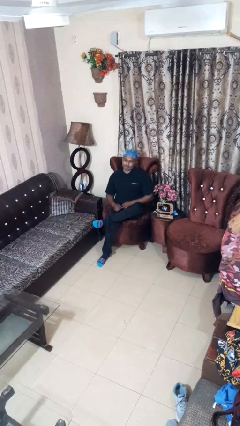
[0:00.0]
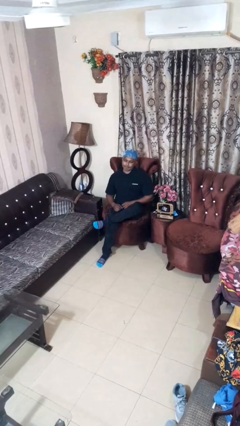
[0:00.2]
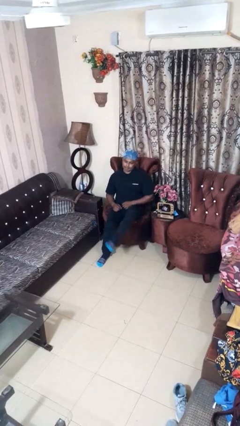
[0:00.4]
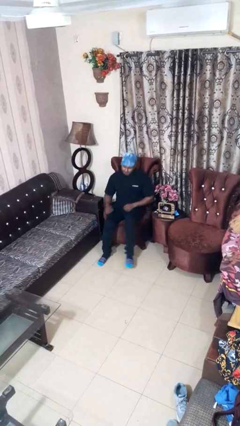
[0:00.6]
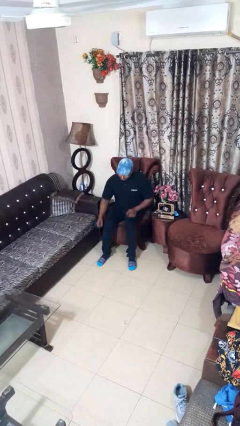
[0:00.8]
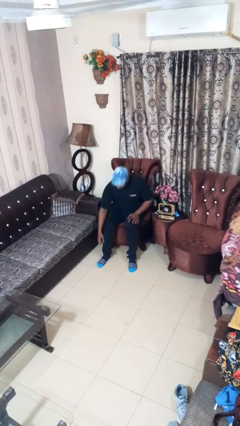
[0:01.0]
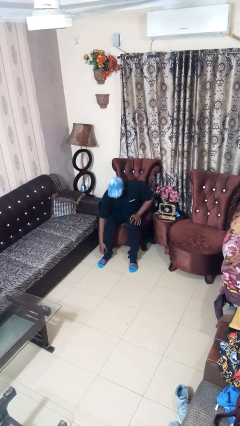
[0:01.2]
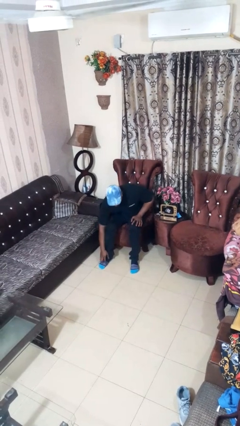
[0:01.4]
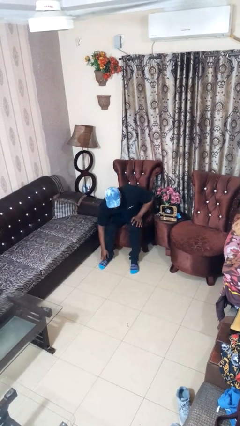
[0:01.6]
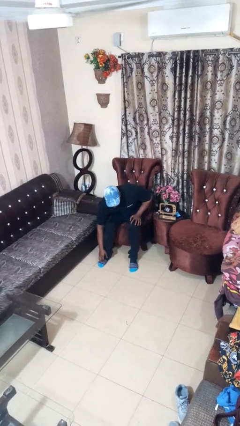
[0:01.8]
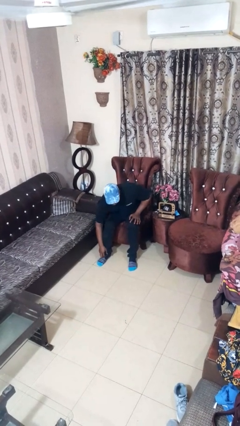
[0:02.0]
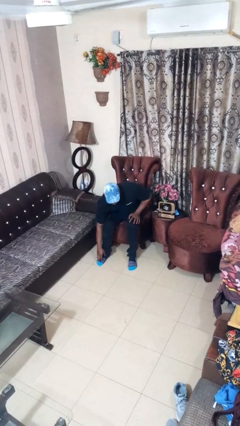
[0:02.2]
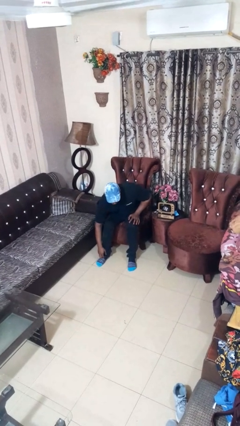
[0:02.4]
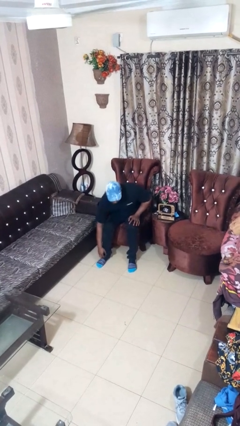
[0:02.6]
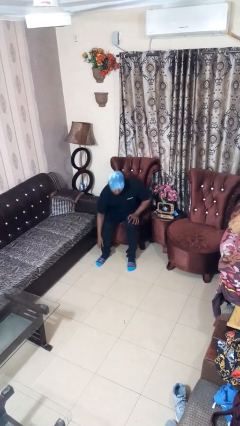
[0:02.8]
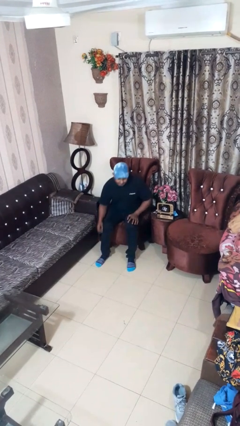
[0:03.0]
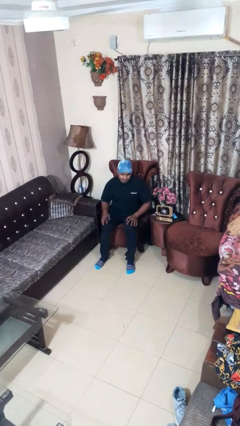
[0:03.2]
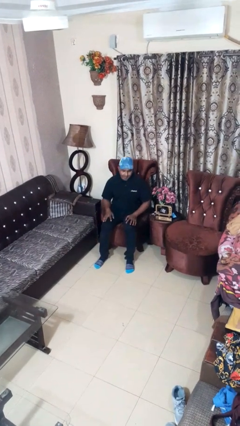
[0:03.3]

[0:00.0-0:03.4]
person rubs foot

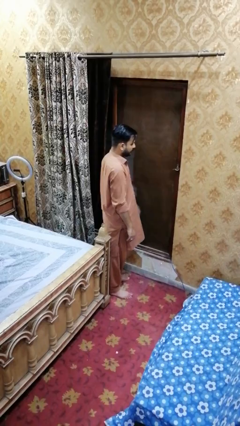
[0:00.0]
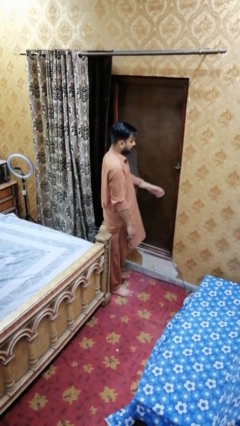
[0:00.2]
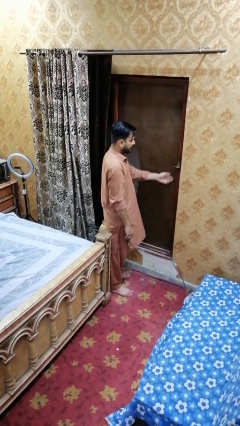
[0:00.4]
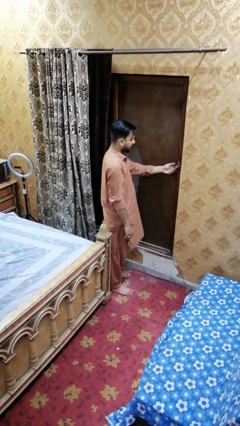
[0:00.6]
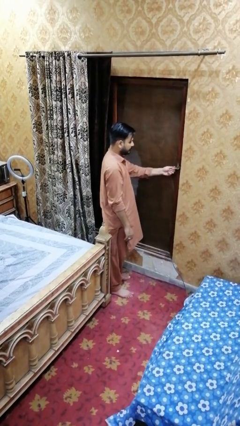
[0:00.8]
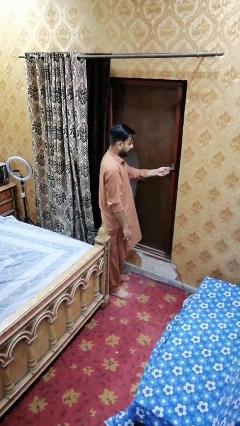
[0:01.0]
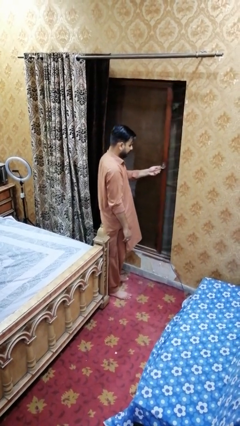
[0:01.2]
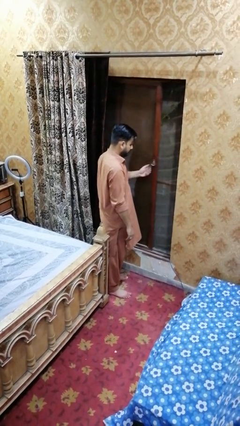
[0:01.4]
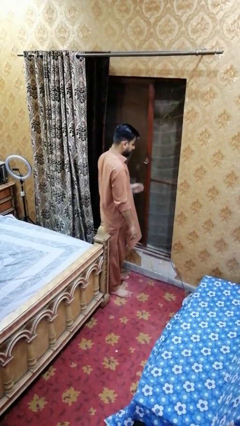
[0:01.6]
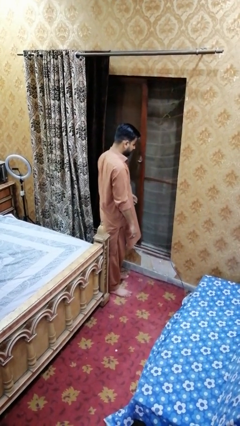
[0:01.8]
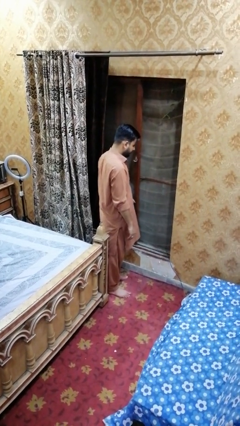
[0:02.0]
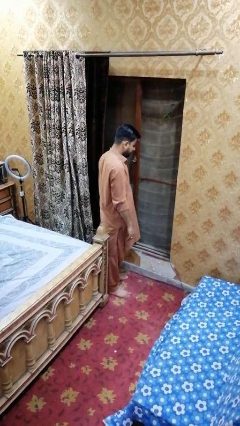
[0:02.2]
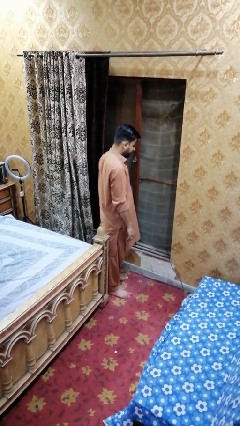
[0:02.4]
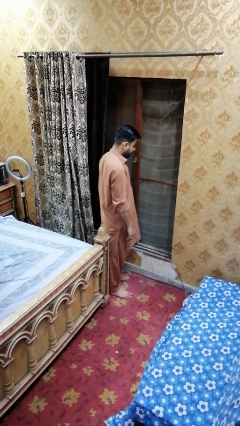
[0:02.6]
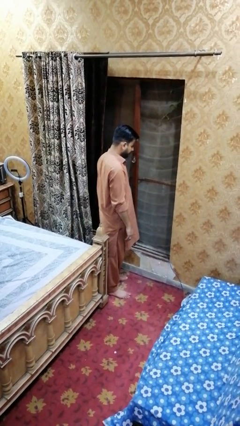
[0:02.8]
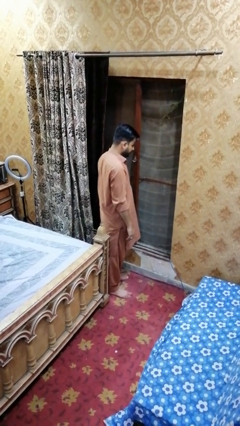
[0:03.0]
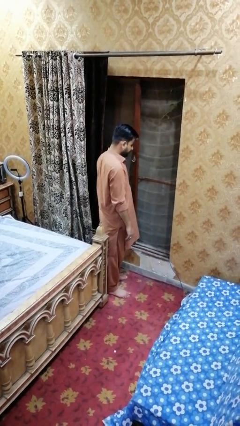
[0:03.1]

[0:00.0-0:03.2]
person opens home window

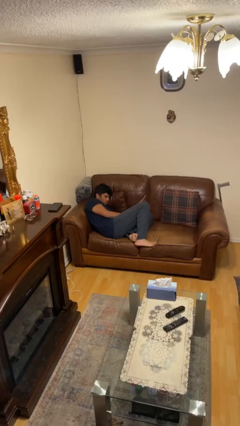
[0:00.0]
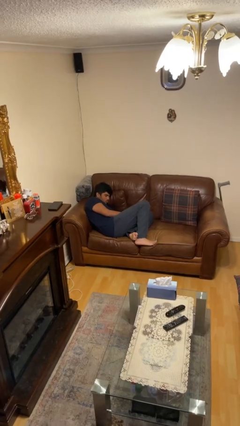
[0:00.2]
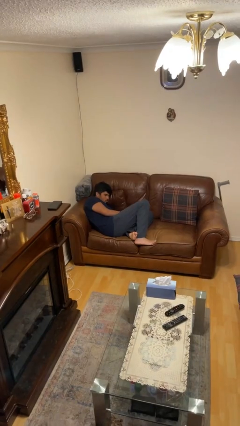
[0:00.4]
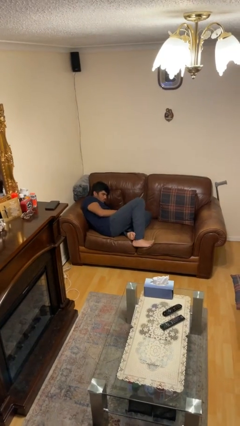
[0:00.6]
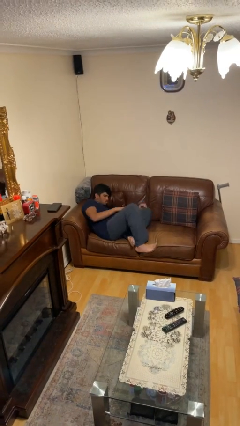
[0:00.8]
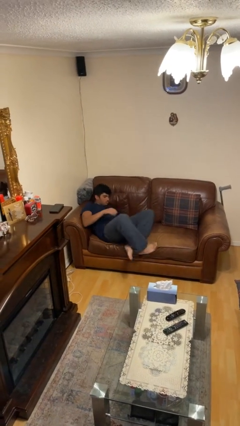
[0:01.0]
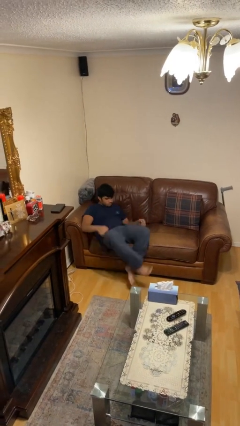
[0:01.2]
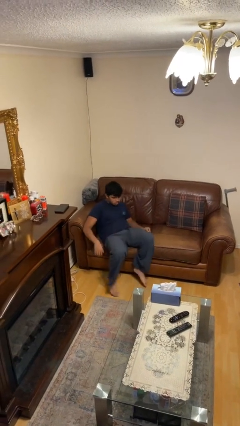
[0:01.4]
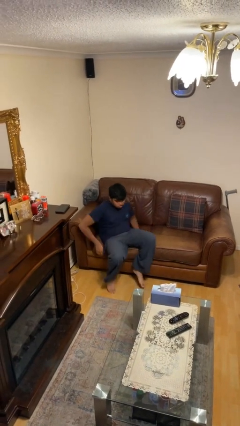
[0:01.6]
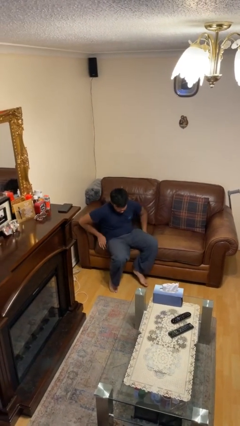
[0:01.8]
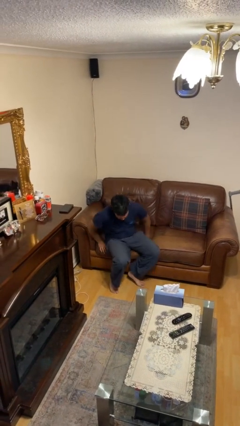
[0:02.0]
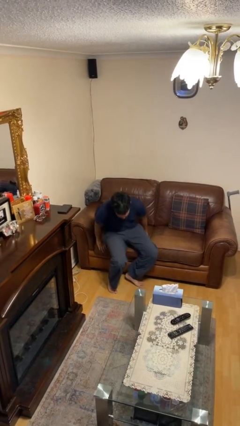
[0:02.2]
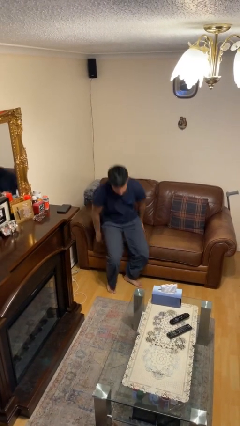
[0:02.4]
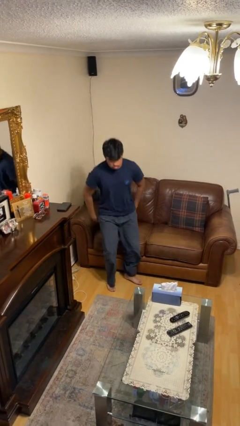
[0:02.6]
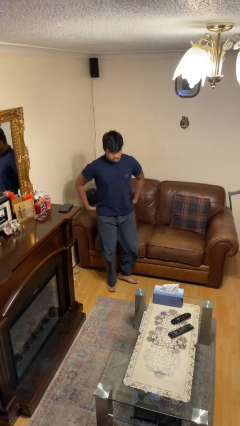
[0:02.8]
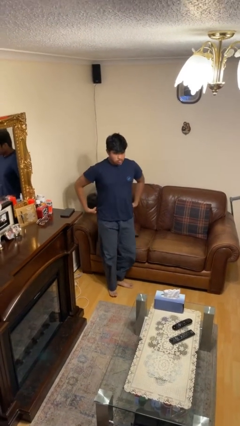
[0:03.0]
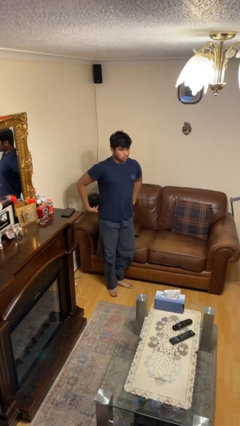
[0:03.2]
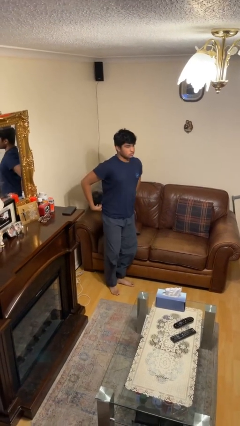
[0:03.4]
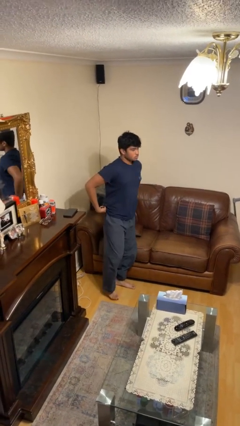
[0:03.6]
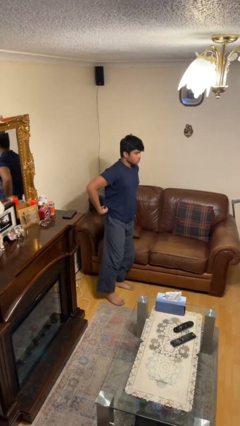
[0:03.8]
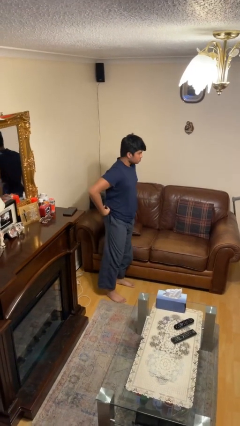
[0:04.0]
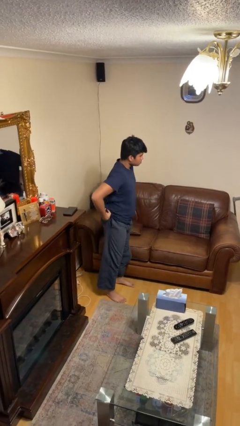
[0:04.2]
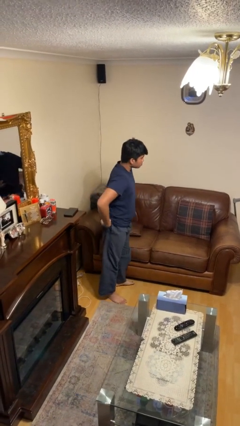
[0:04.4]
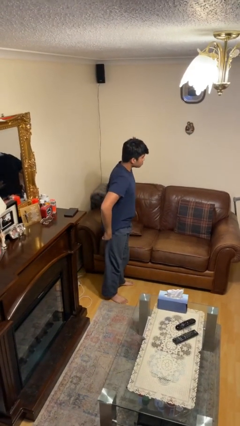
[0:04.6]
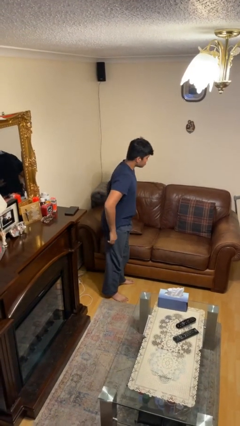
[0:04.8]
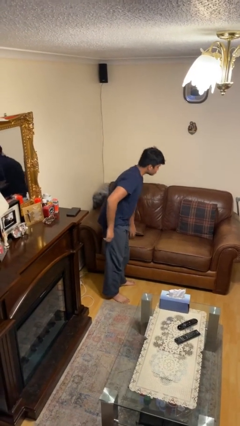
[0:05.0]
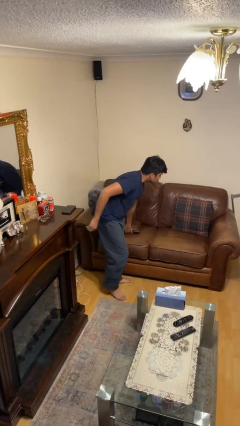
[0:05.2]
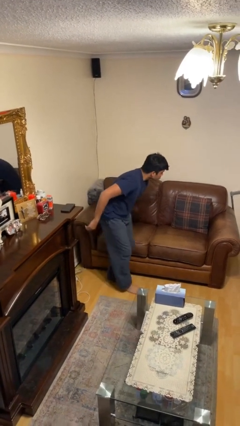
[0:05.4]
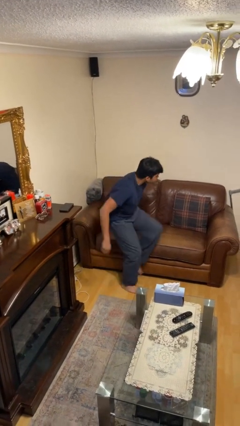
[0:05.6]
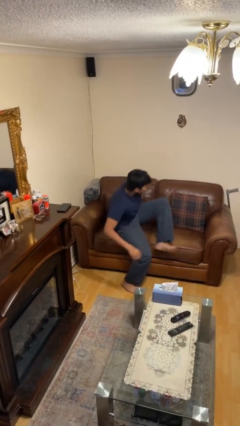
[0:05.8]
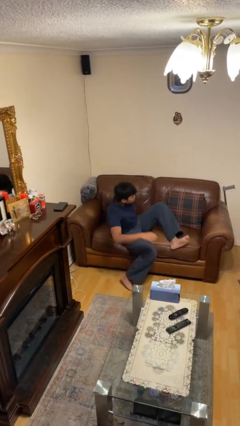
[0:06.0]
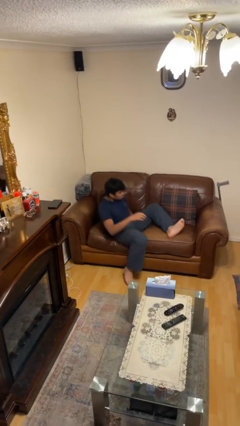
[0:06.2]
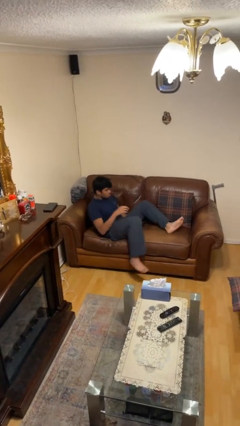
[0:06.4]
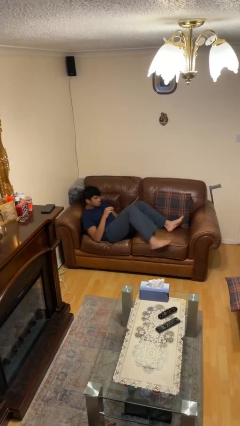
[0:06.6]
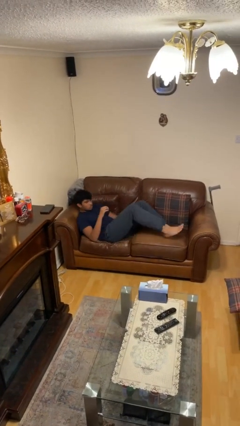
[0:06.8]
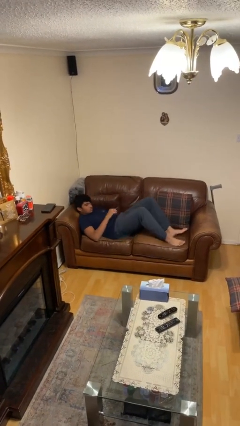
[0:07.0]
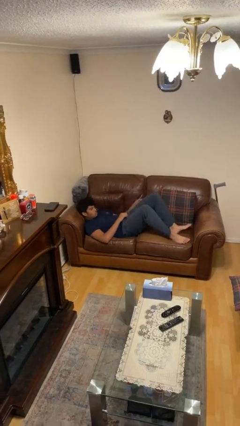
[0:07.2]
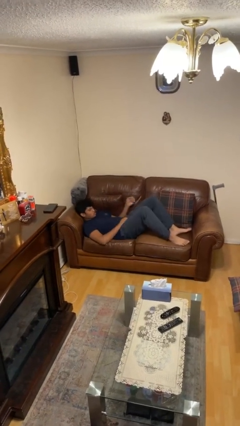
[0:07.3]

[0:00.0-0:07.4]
person stands up

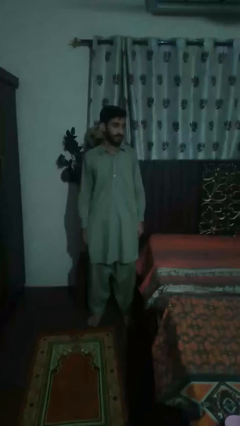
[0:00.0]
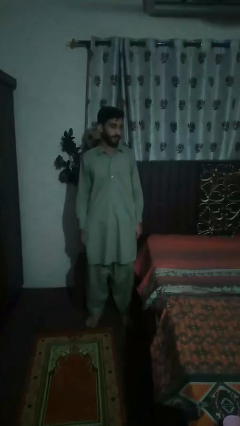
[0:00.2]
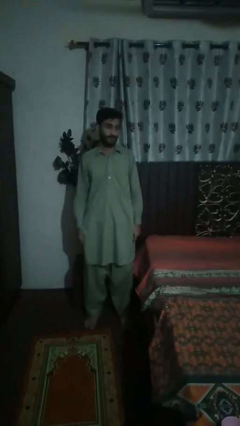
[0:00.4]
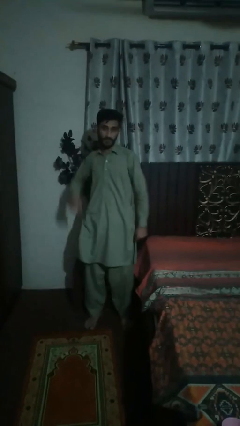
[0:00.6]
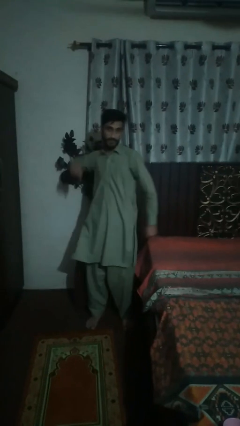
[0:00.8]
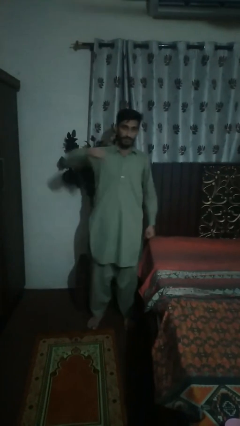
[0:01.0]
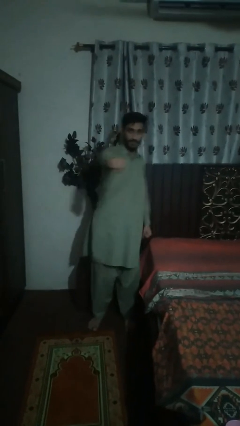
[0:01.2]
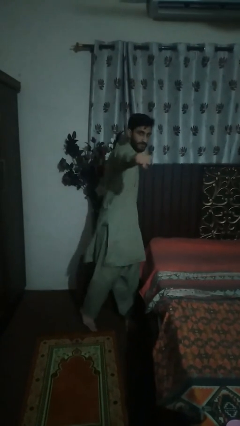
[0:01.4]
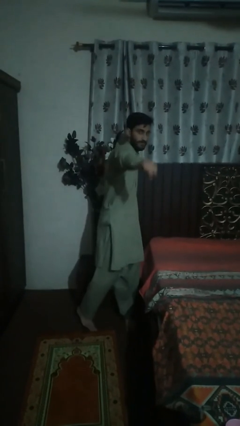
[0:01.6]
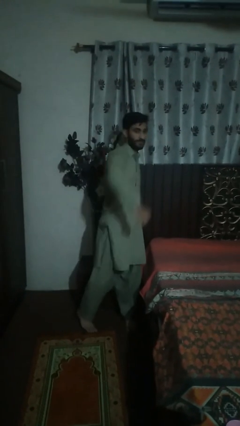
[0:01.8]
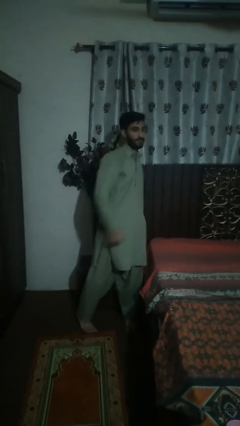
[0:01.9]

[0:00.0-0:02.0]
person punches

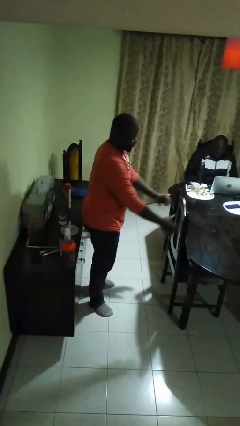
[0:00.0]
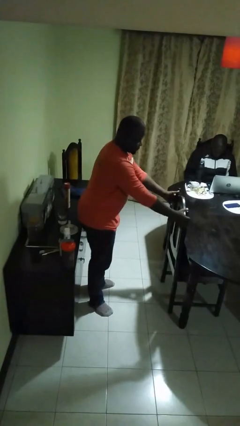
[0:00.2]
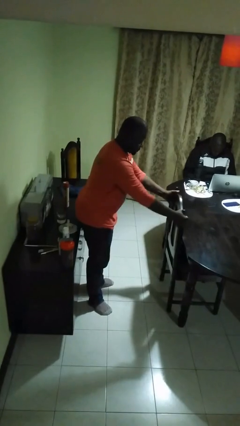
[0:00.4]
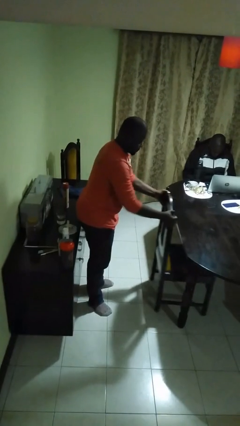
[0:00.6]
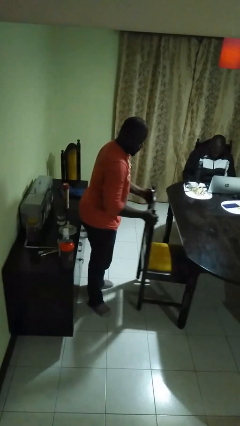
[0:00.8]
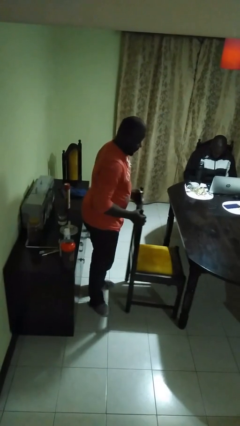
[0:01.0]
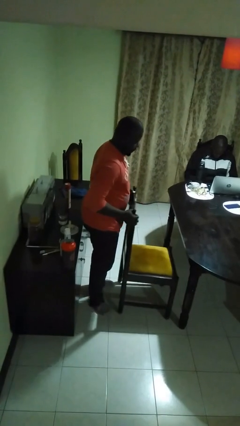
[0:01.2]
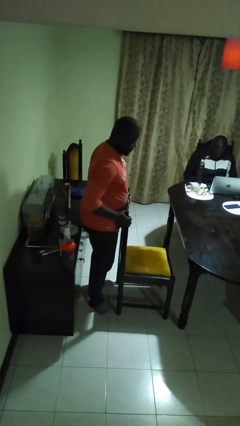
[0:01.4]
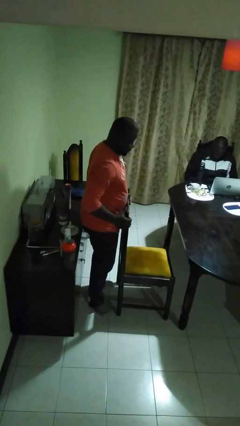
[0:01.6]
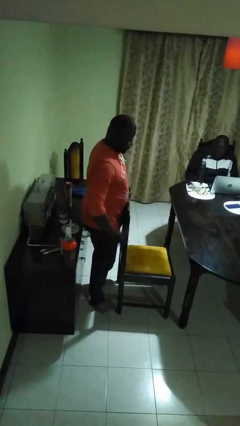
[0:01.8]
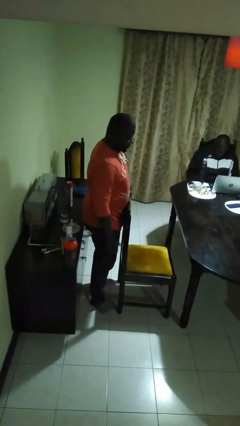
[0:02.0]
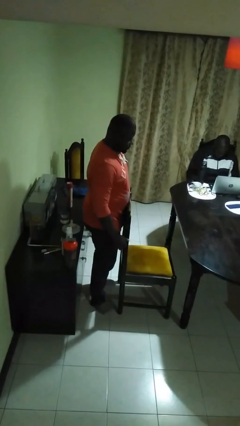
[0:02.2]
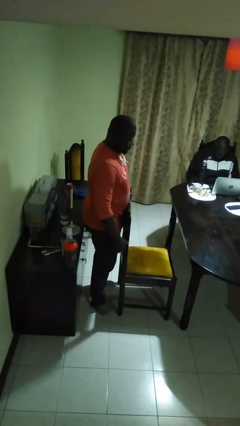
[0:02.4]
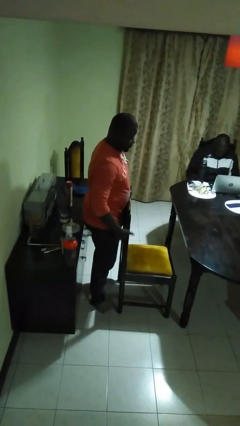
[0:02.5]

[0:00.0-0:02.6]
person pulls out chair
